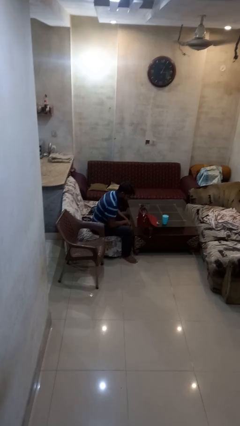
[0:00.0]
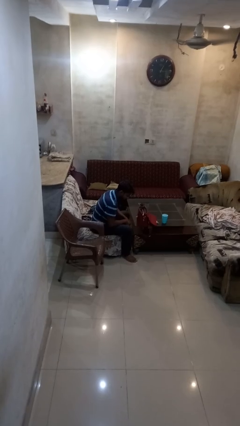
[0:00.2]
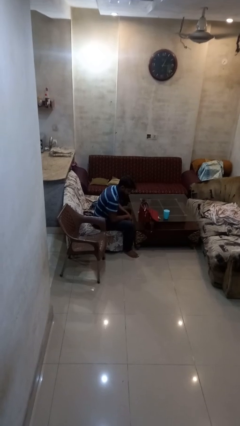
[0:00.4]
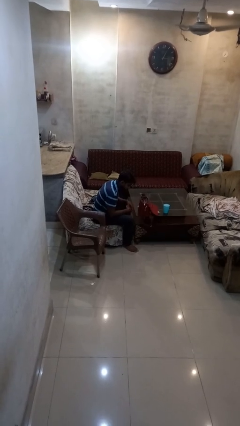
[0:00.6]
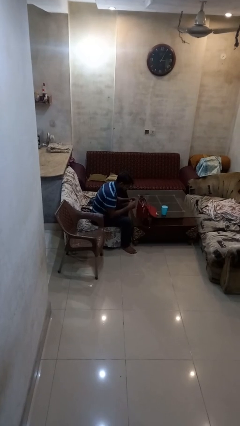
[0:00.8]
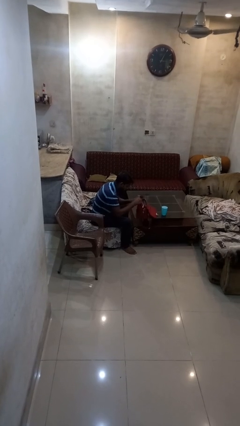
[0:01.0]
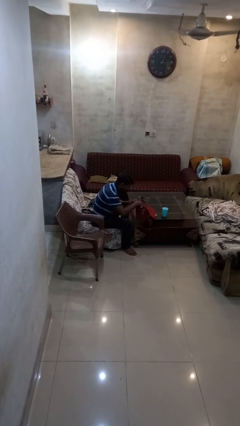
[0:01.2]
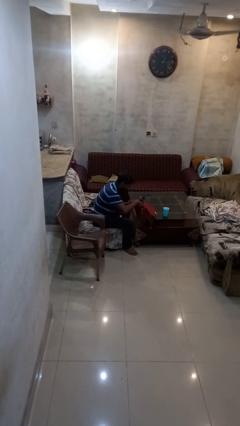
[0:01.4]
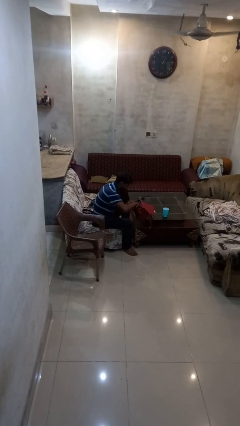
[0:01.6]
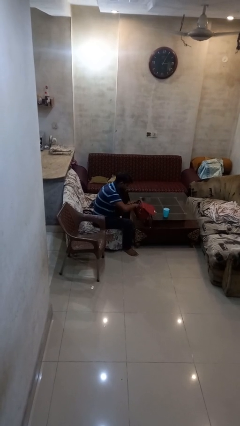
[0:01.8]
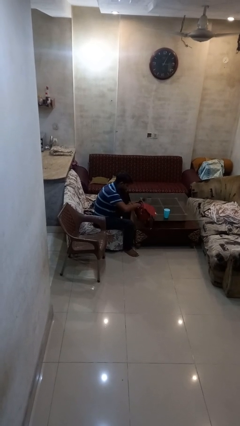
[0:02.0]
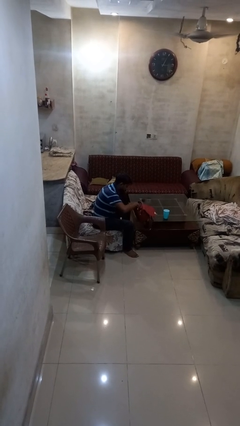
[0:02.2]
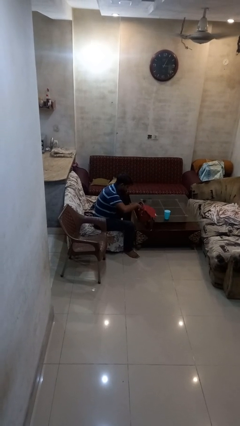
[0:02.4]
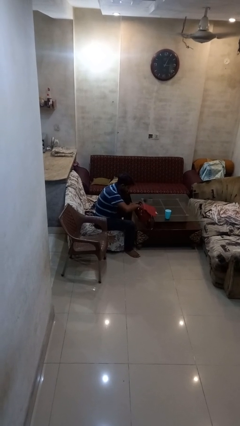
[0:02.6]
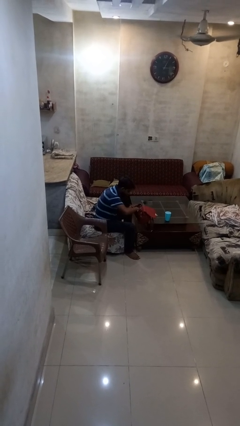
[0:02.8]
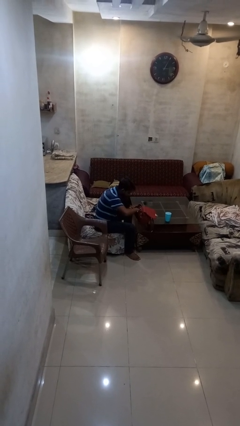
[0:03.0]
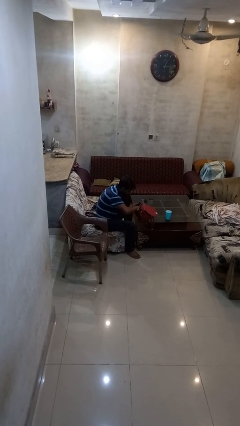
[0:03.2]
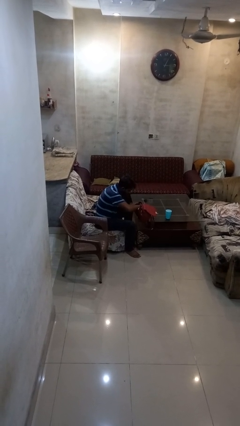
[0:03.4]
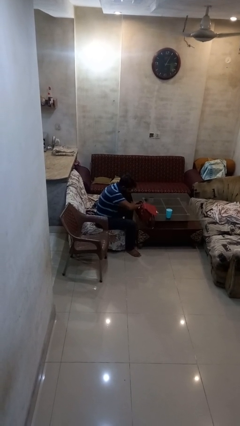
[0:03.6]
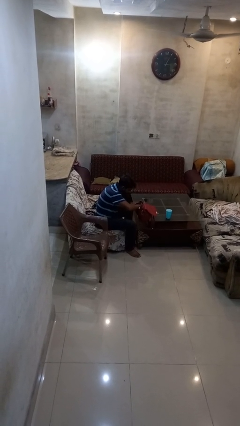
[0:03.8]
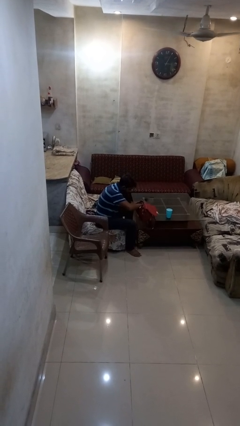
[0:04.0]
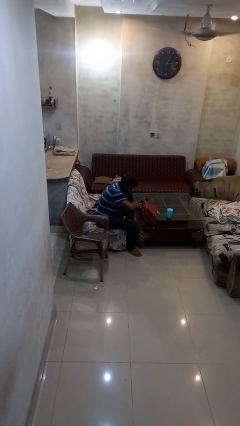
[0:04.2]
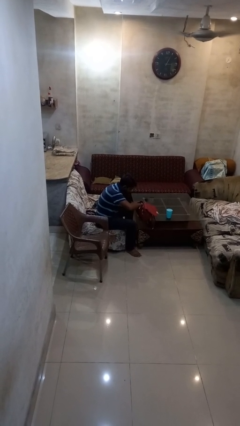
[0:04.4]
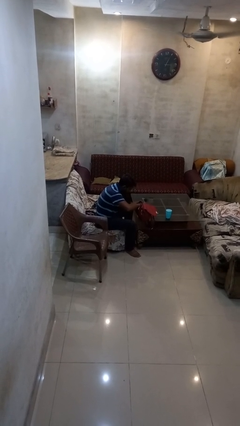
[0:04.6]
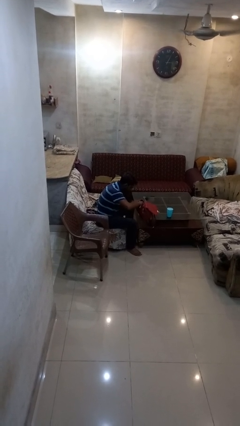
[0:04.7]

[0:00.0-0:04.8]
person searches in purse

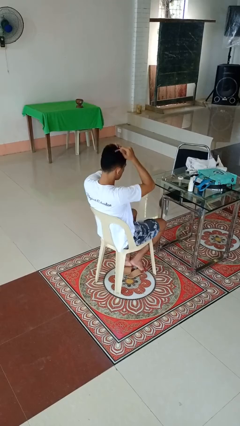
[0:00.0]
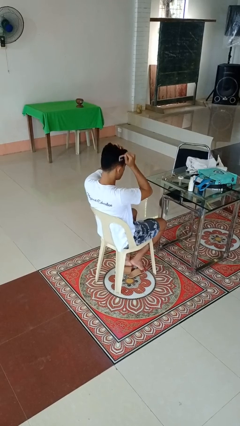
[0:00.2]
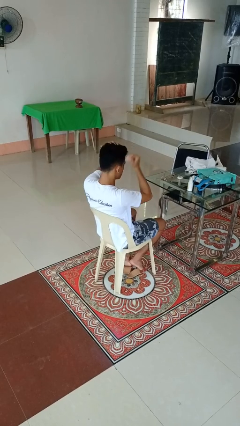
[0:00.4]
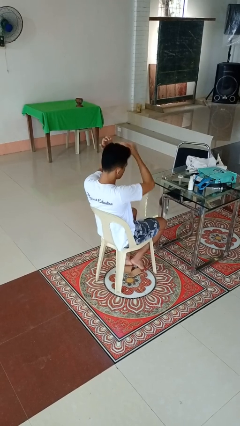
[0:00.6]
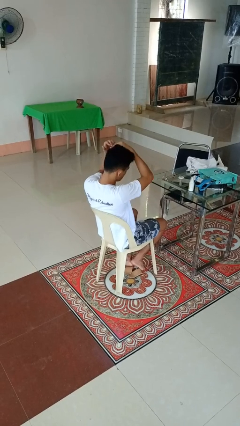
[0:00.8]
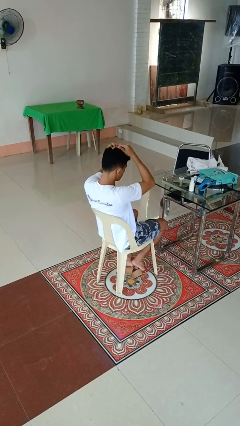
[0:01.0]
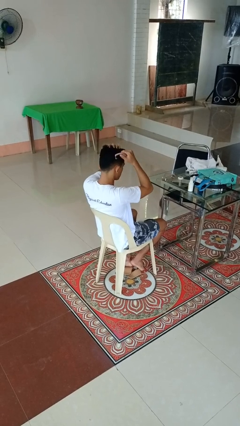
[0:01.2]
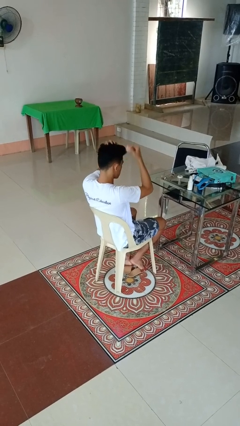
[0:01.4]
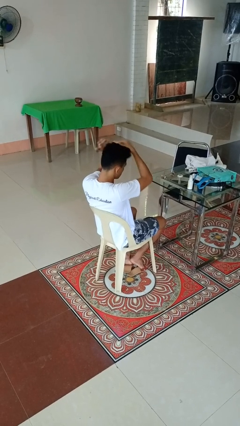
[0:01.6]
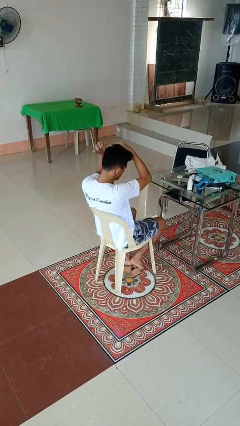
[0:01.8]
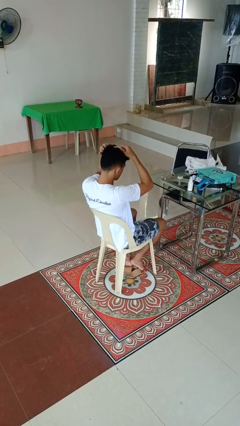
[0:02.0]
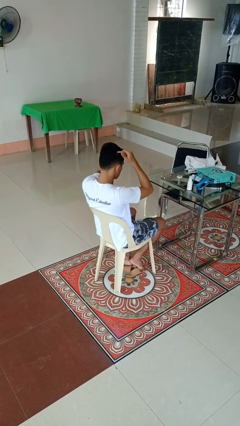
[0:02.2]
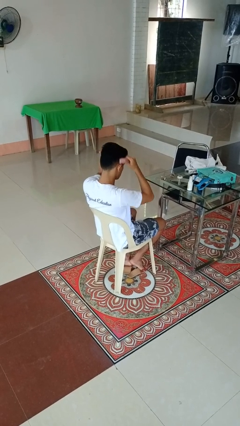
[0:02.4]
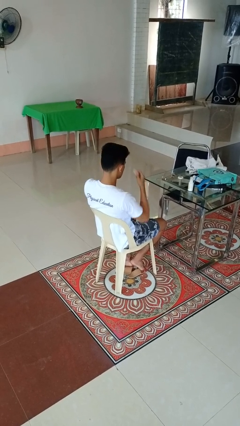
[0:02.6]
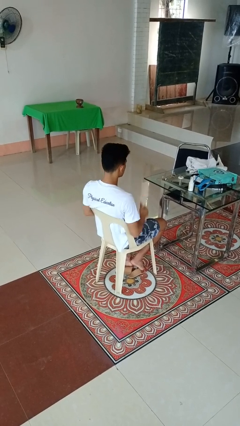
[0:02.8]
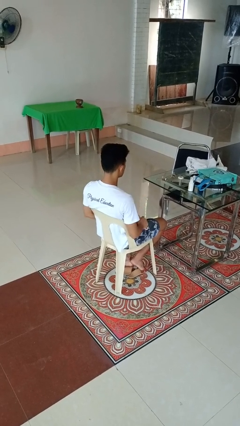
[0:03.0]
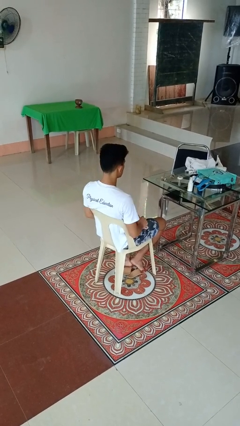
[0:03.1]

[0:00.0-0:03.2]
person brushes hair

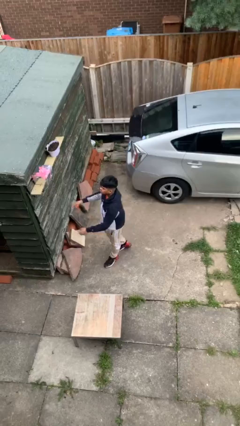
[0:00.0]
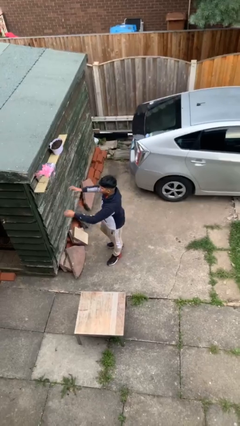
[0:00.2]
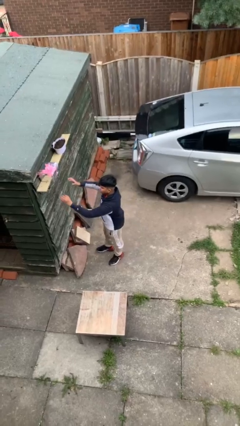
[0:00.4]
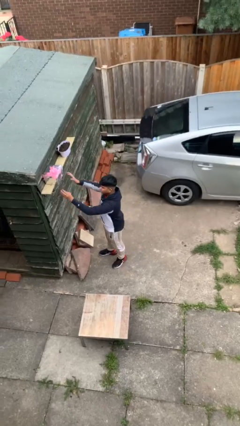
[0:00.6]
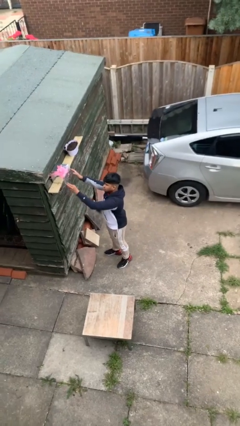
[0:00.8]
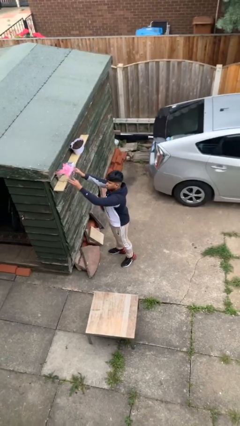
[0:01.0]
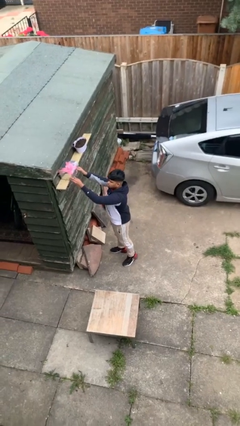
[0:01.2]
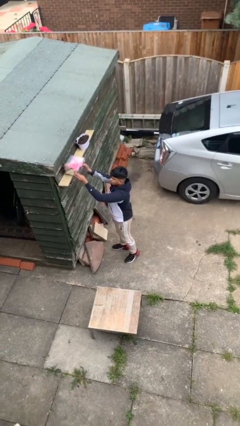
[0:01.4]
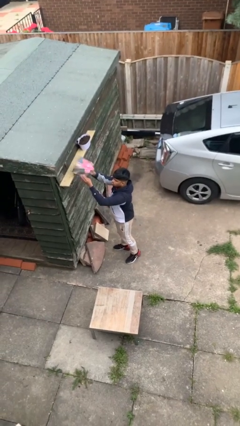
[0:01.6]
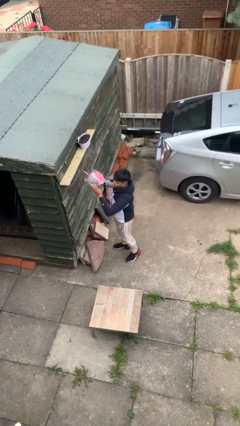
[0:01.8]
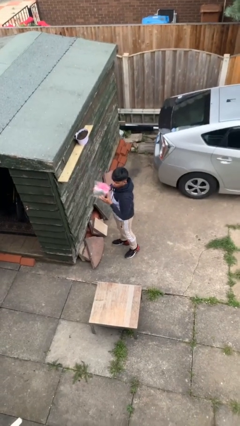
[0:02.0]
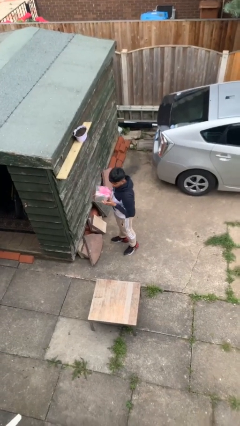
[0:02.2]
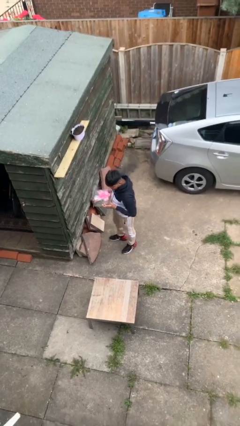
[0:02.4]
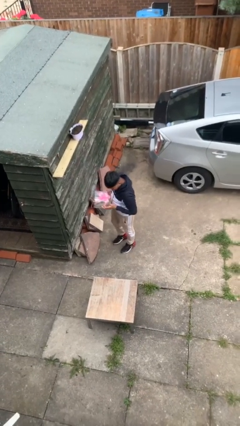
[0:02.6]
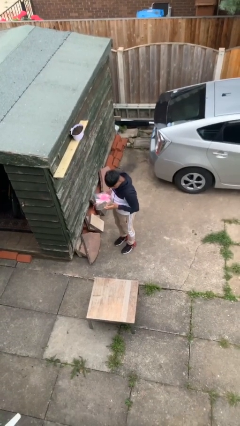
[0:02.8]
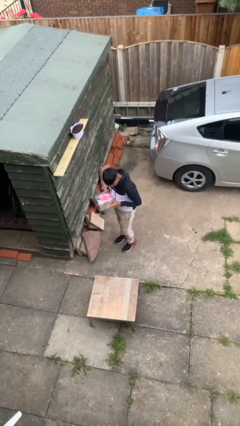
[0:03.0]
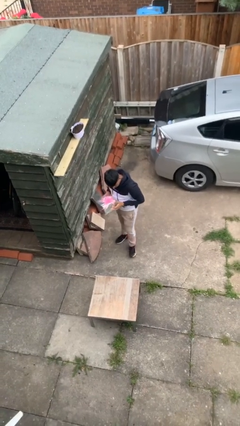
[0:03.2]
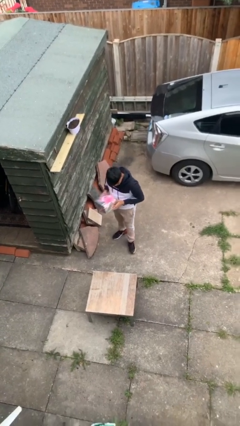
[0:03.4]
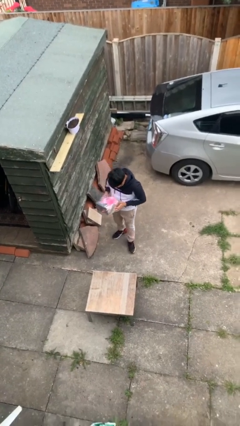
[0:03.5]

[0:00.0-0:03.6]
person picks up object from shelf

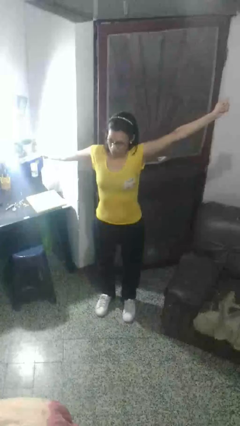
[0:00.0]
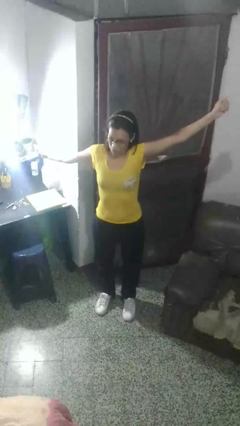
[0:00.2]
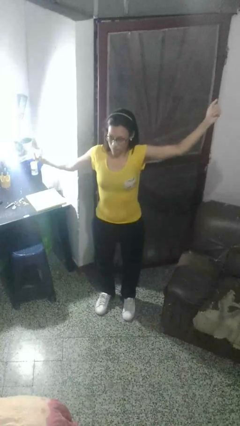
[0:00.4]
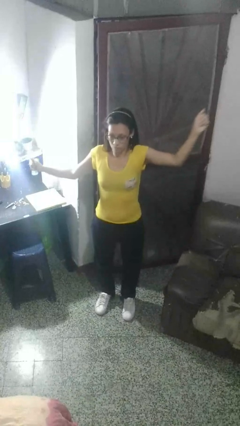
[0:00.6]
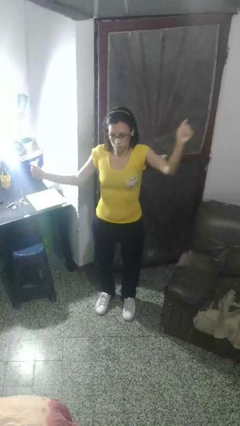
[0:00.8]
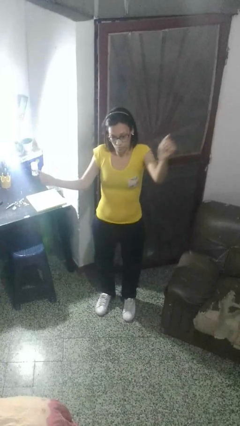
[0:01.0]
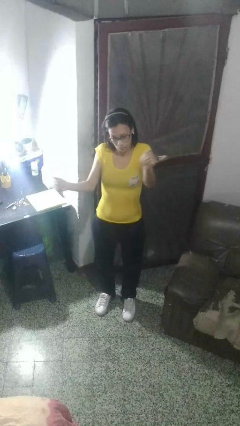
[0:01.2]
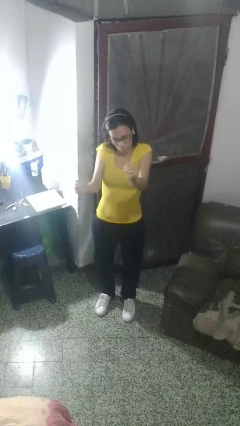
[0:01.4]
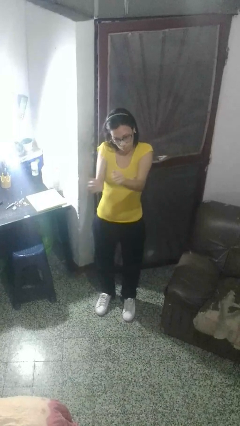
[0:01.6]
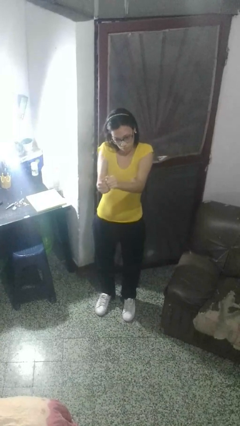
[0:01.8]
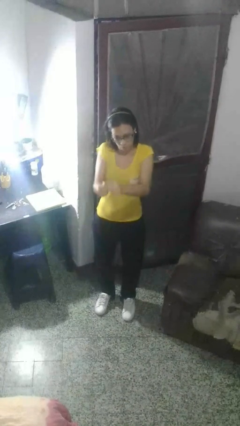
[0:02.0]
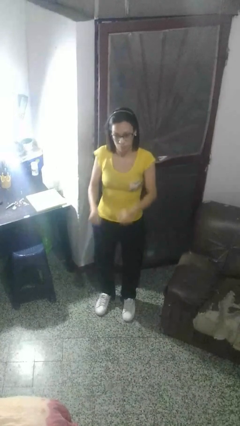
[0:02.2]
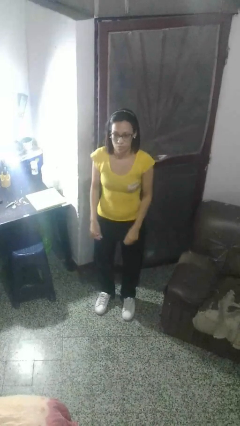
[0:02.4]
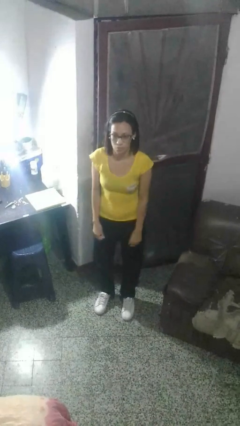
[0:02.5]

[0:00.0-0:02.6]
person gestures zoom out

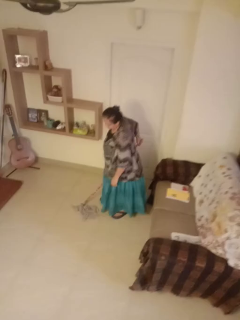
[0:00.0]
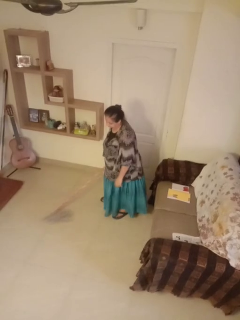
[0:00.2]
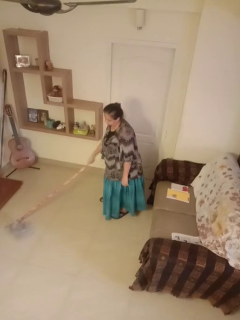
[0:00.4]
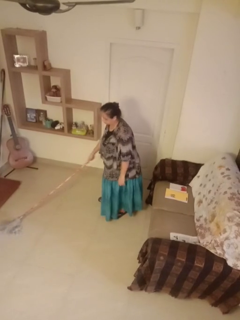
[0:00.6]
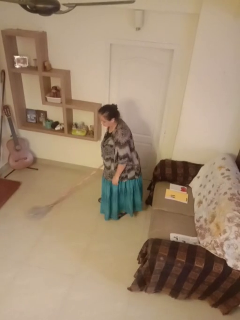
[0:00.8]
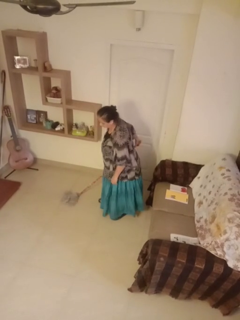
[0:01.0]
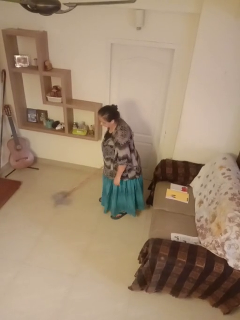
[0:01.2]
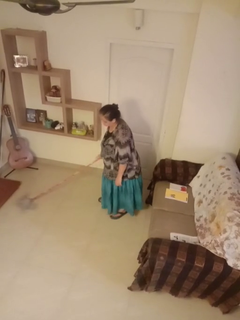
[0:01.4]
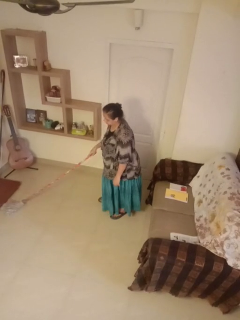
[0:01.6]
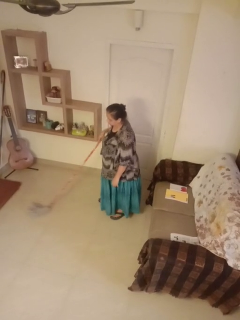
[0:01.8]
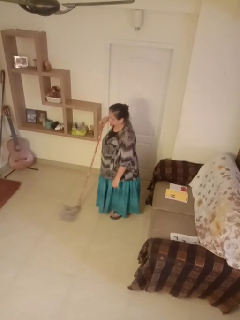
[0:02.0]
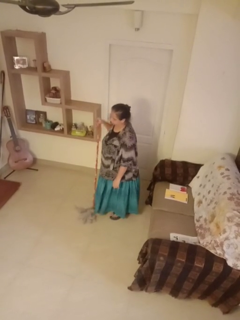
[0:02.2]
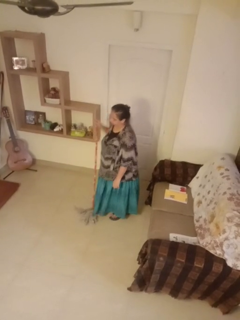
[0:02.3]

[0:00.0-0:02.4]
person mops

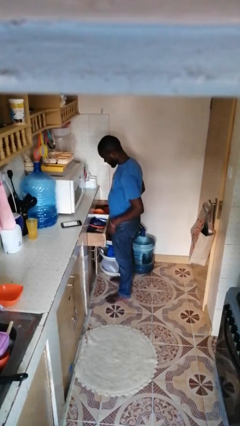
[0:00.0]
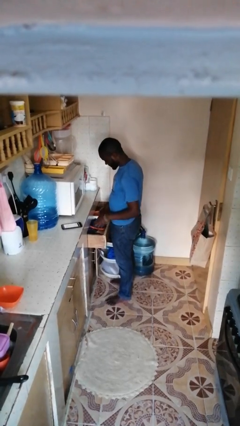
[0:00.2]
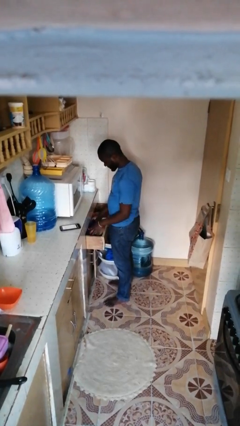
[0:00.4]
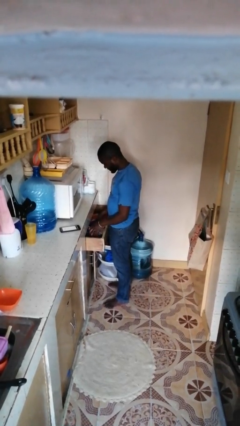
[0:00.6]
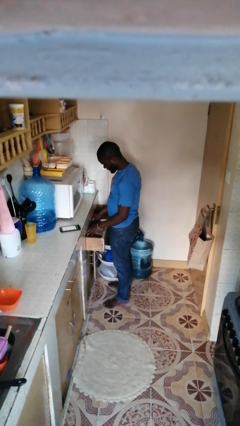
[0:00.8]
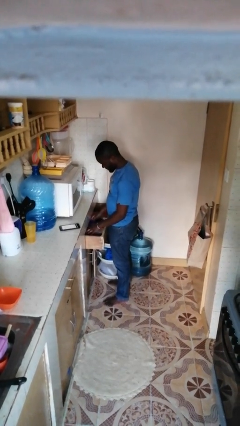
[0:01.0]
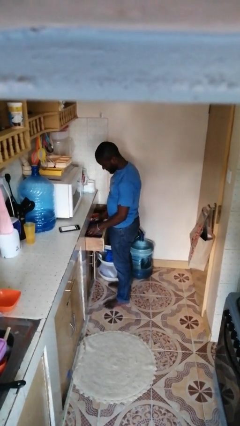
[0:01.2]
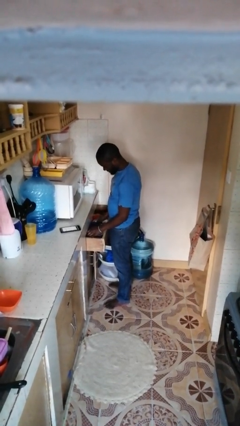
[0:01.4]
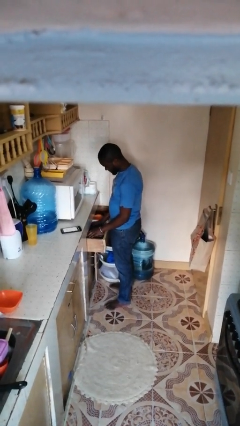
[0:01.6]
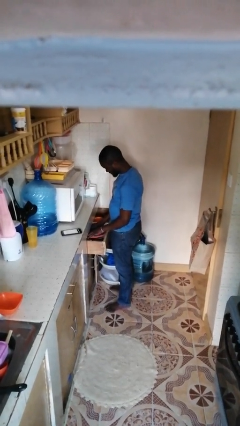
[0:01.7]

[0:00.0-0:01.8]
person searches in kitchen drawer
